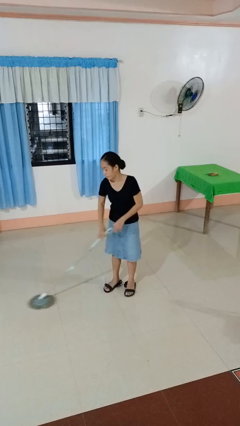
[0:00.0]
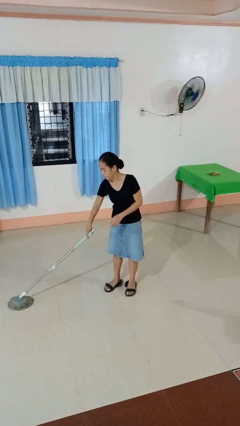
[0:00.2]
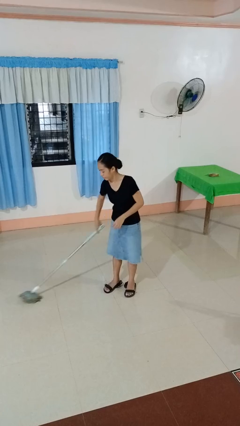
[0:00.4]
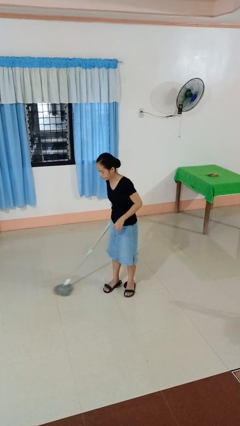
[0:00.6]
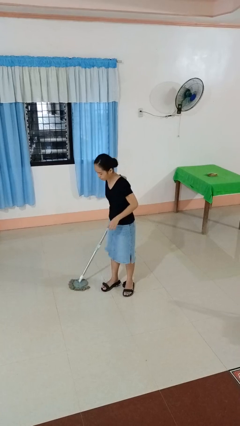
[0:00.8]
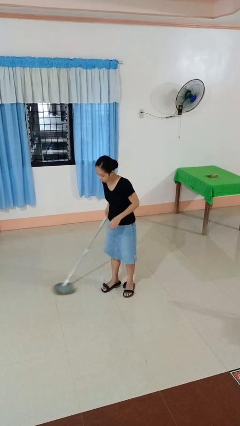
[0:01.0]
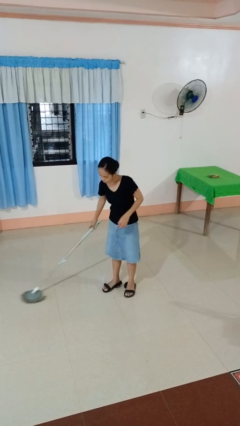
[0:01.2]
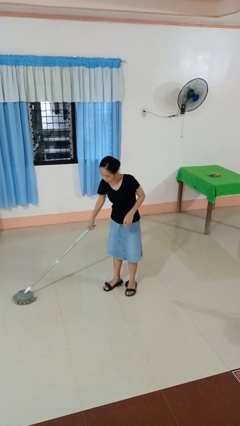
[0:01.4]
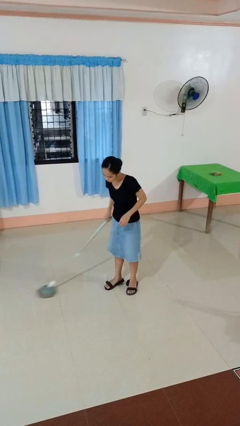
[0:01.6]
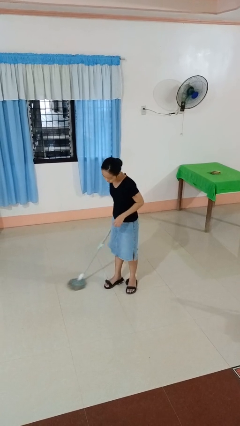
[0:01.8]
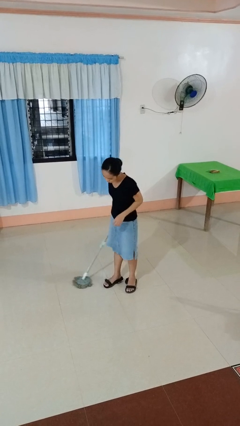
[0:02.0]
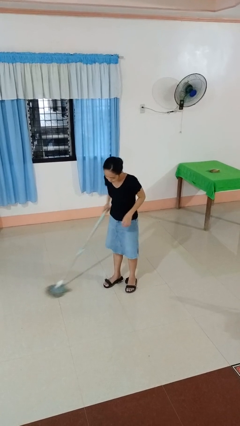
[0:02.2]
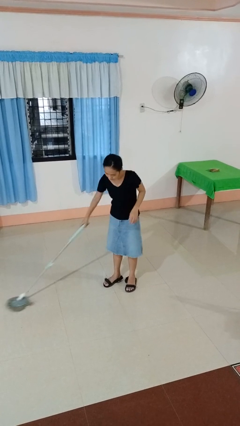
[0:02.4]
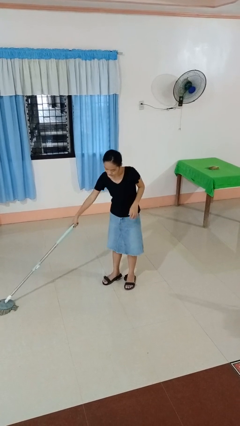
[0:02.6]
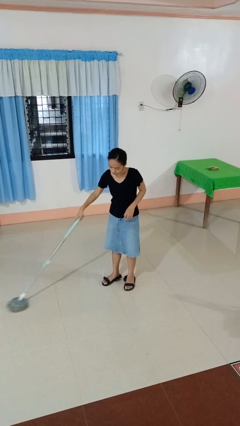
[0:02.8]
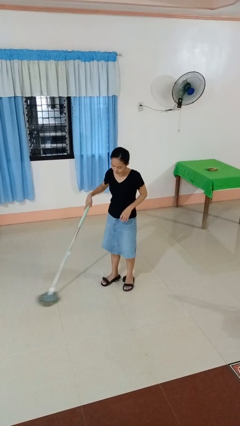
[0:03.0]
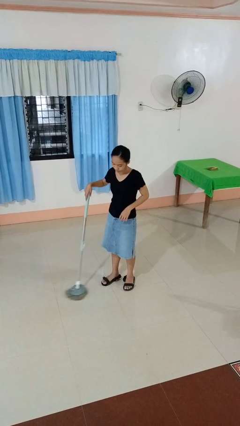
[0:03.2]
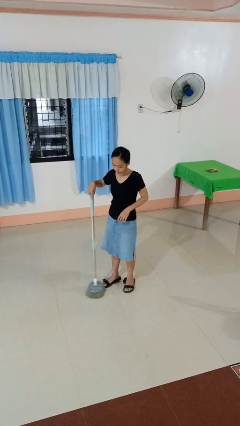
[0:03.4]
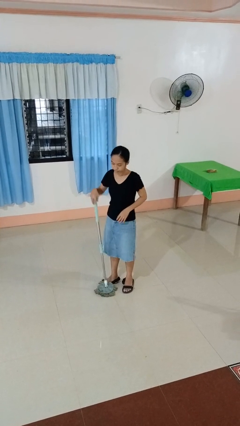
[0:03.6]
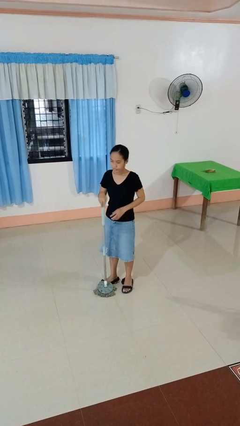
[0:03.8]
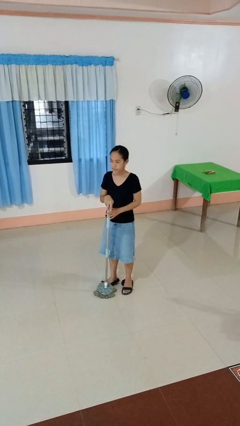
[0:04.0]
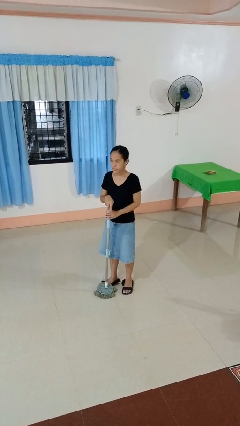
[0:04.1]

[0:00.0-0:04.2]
person mops

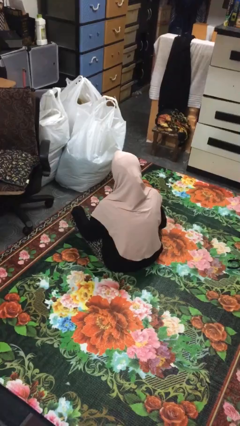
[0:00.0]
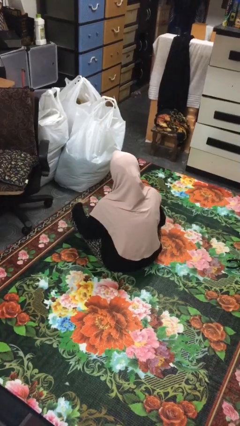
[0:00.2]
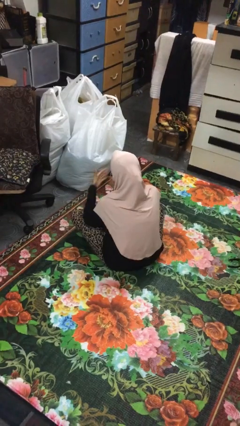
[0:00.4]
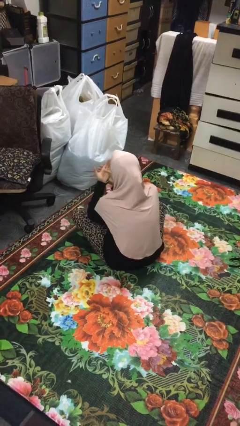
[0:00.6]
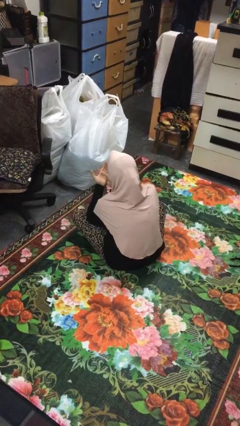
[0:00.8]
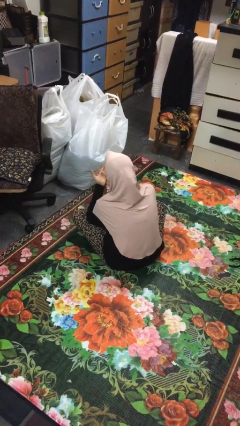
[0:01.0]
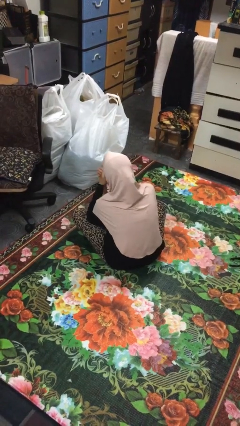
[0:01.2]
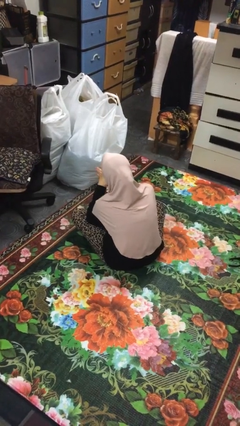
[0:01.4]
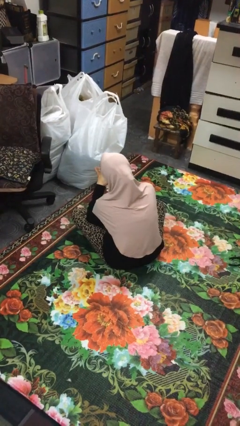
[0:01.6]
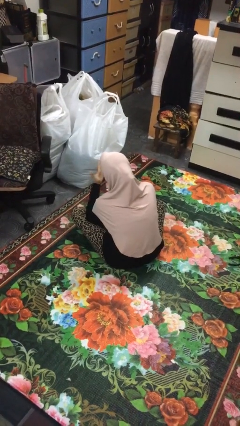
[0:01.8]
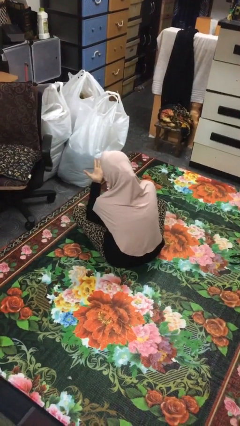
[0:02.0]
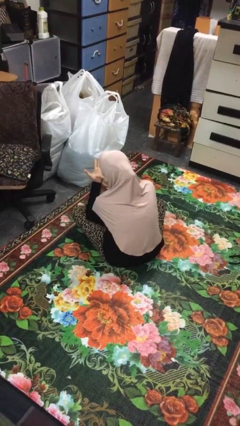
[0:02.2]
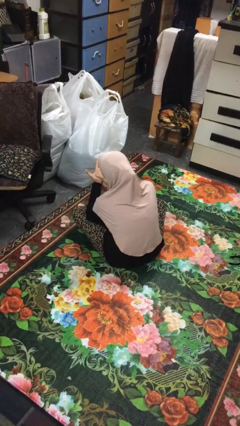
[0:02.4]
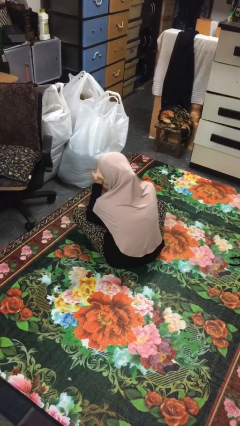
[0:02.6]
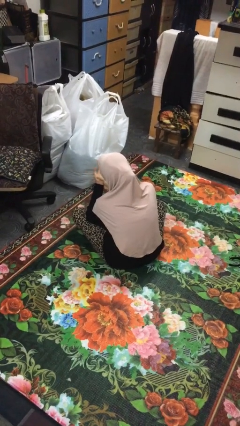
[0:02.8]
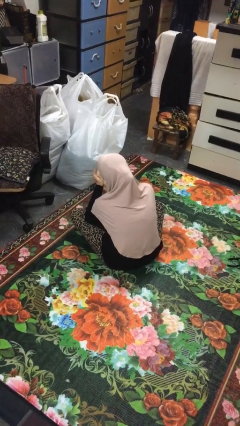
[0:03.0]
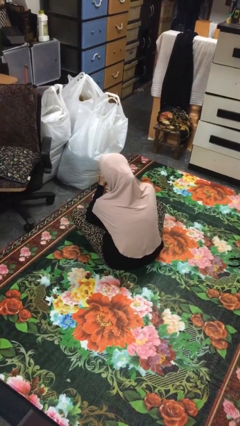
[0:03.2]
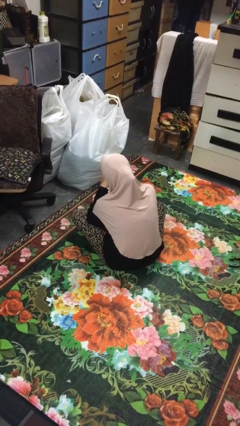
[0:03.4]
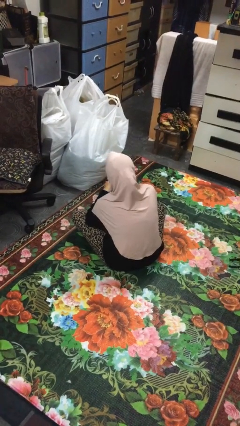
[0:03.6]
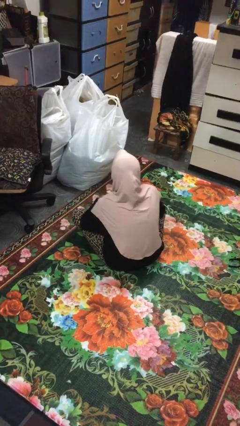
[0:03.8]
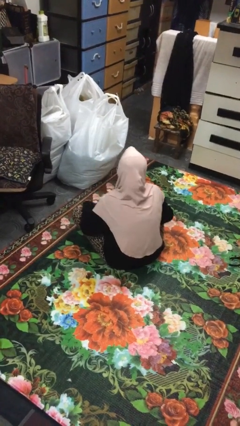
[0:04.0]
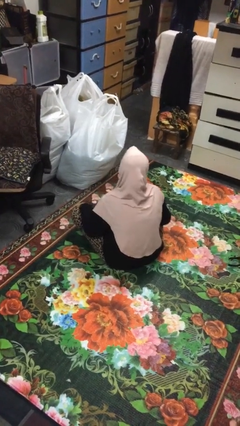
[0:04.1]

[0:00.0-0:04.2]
person looks at hands in lap

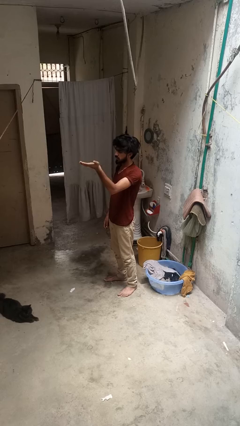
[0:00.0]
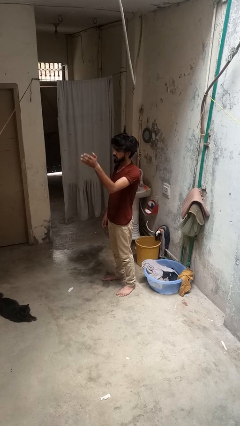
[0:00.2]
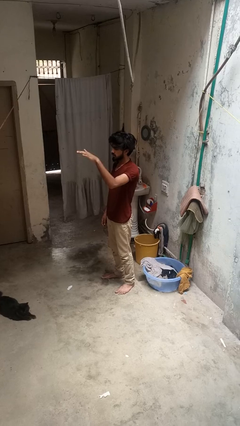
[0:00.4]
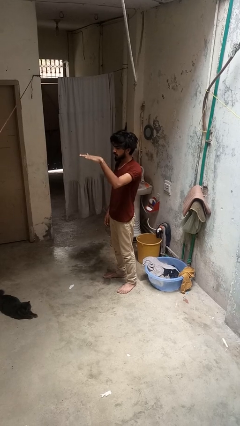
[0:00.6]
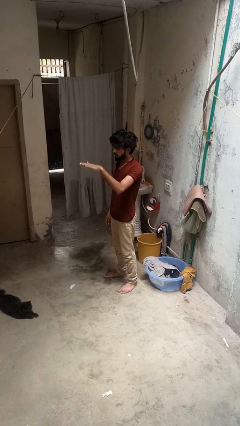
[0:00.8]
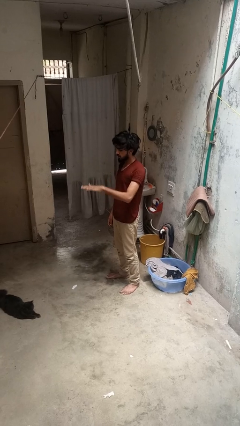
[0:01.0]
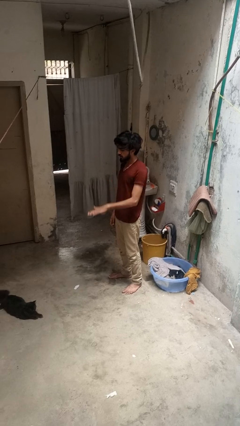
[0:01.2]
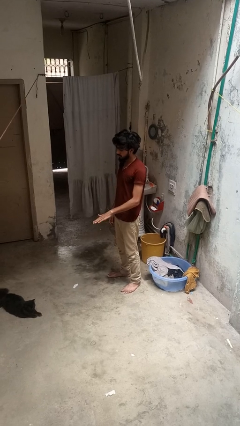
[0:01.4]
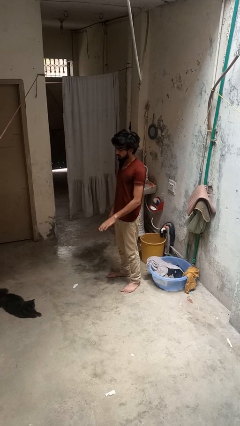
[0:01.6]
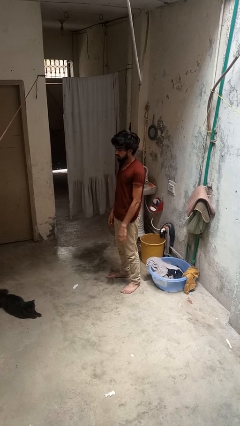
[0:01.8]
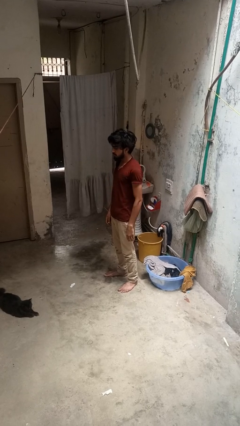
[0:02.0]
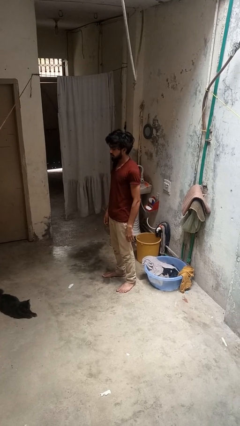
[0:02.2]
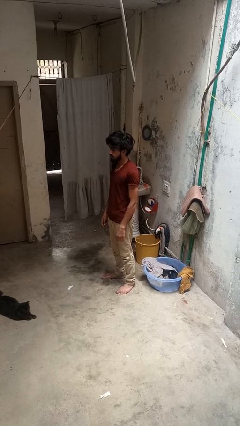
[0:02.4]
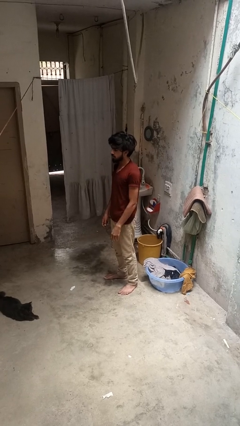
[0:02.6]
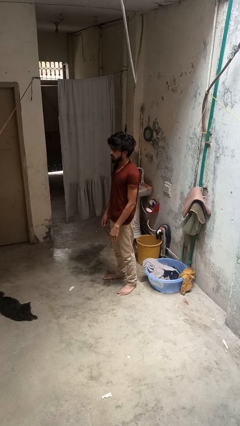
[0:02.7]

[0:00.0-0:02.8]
person gestures swipe down

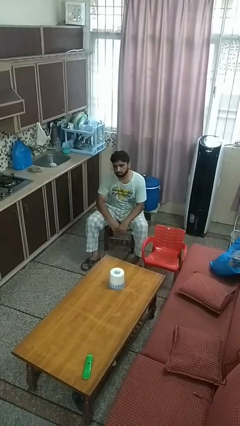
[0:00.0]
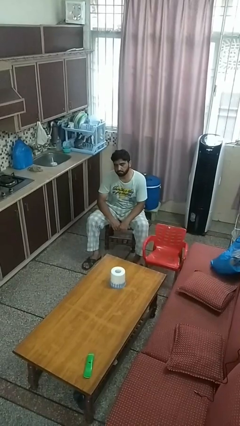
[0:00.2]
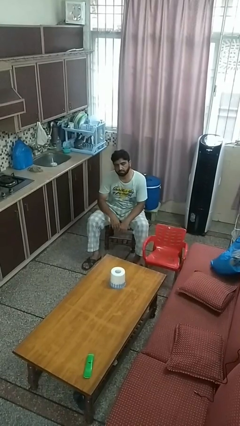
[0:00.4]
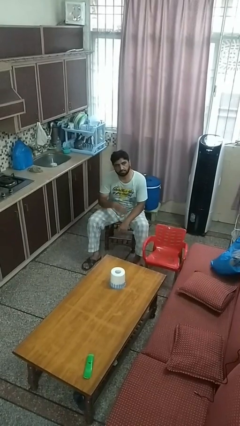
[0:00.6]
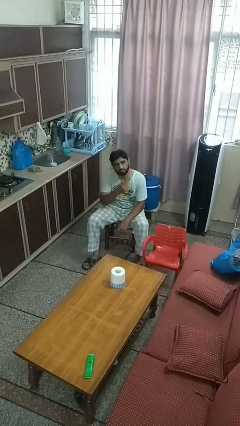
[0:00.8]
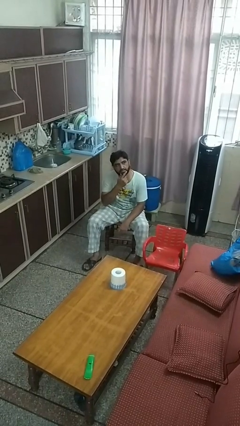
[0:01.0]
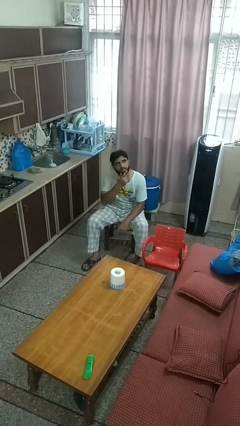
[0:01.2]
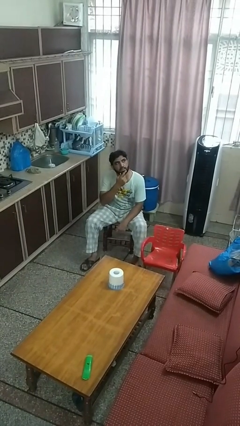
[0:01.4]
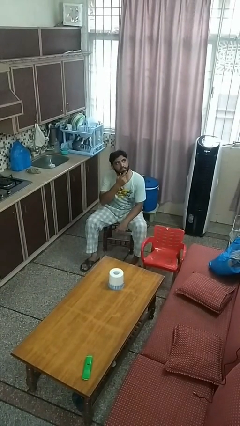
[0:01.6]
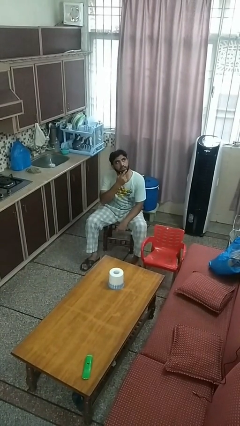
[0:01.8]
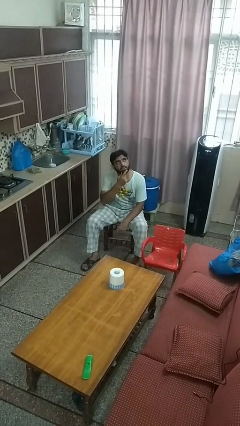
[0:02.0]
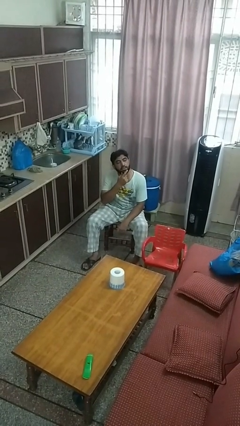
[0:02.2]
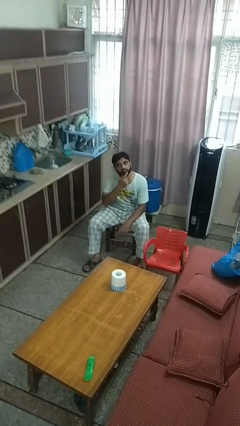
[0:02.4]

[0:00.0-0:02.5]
person strokes chin

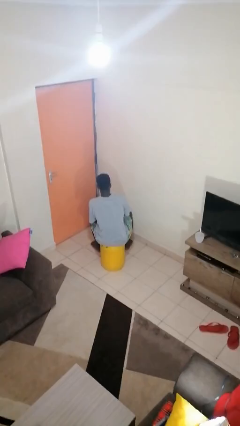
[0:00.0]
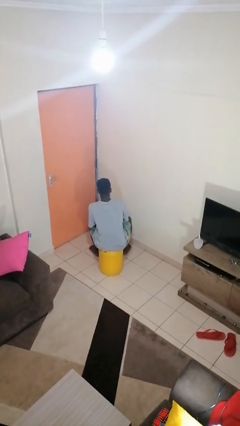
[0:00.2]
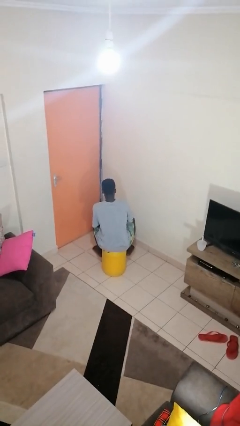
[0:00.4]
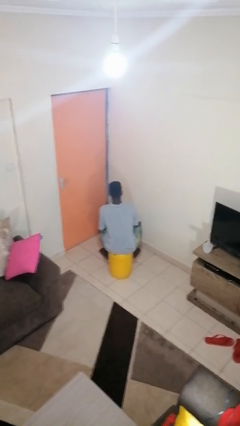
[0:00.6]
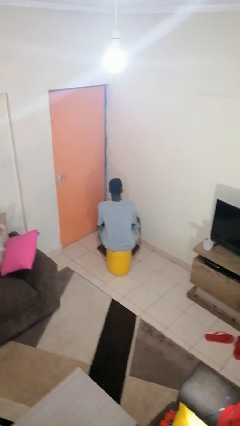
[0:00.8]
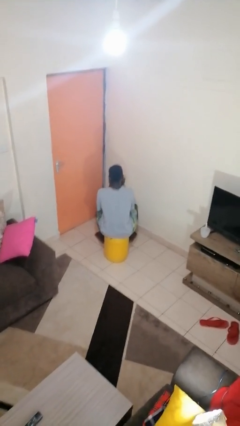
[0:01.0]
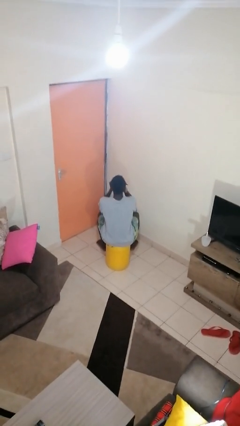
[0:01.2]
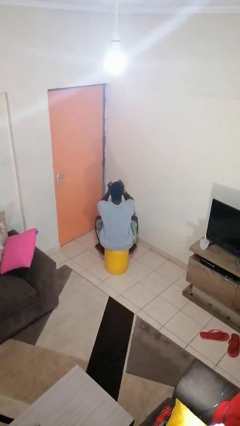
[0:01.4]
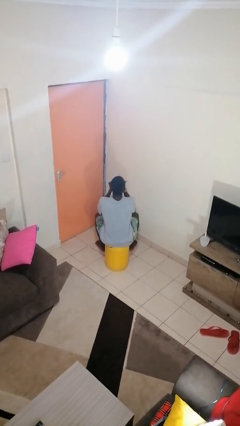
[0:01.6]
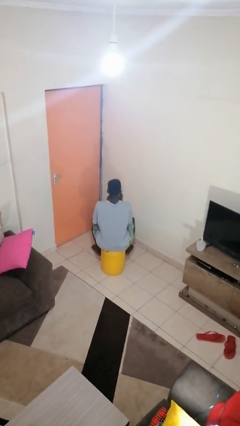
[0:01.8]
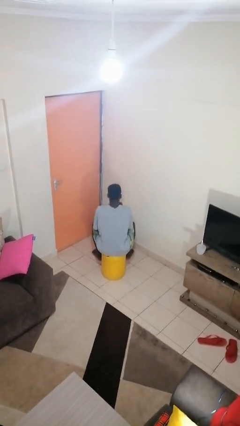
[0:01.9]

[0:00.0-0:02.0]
person stirs mug

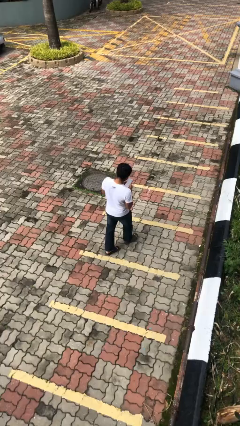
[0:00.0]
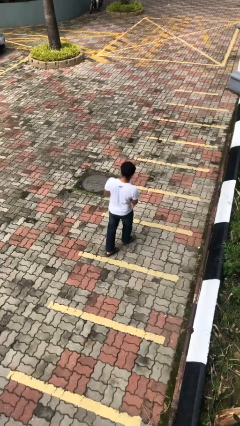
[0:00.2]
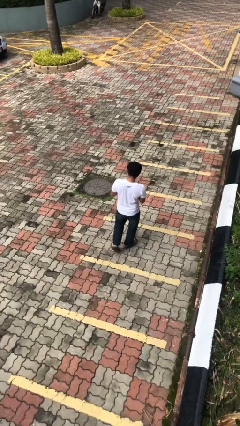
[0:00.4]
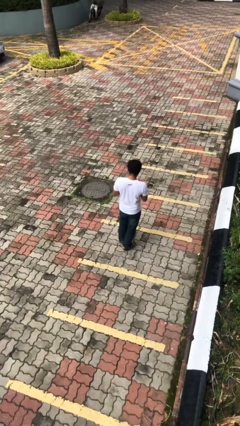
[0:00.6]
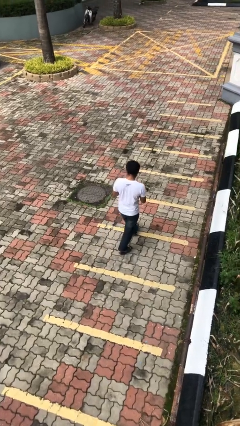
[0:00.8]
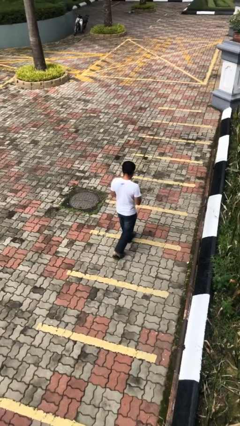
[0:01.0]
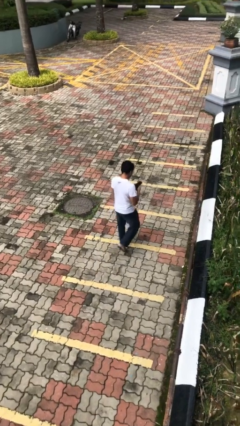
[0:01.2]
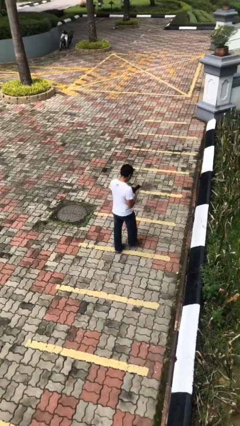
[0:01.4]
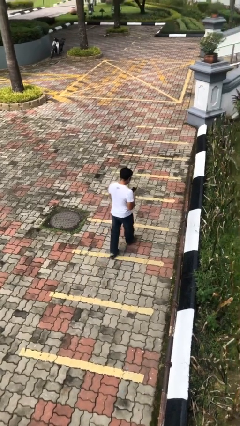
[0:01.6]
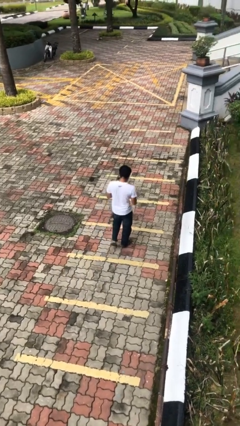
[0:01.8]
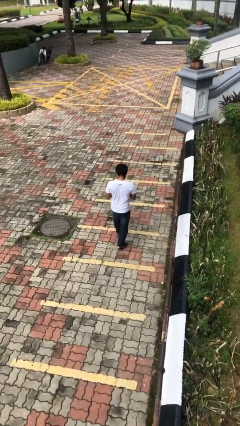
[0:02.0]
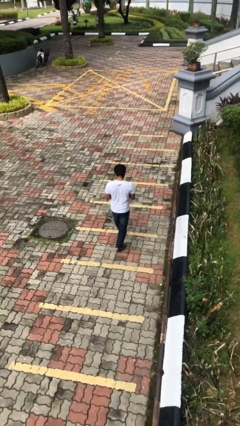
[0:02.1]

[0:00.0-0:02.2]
person texts on phone
